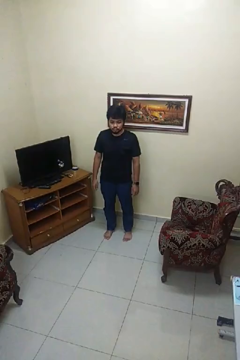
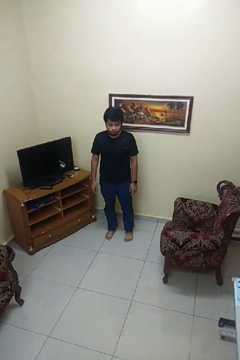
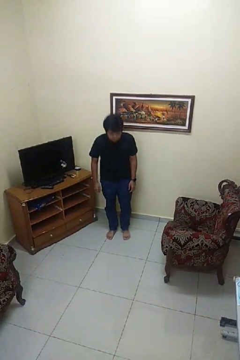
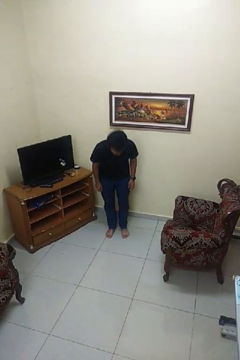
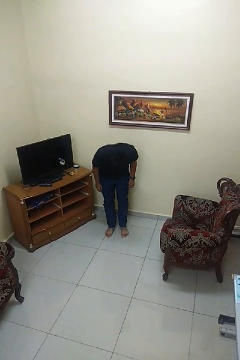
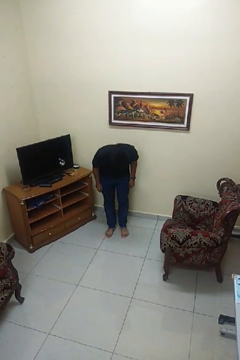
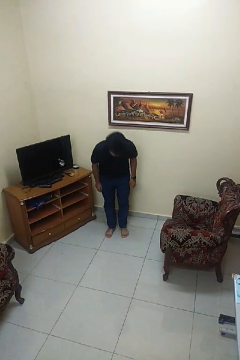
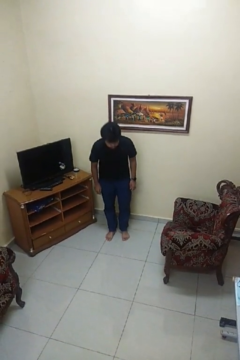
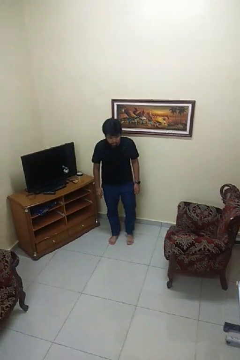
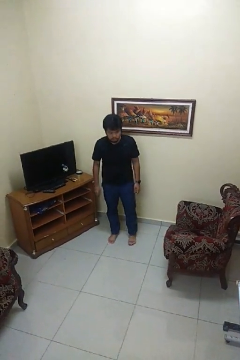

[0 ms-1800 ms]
person bows

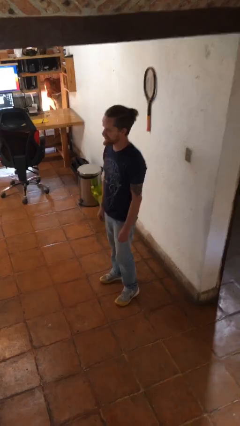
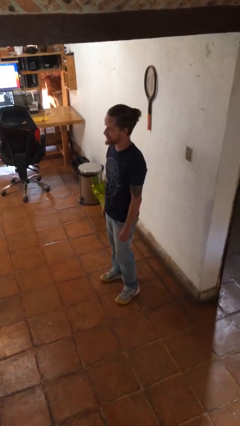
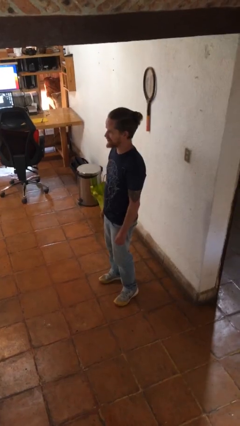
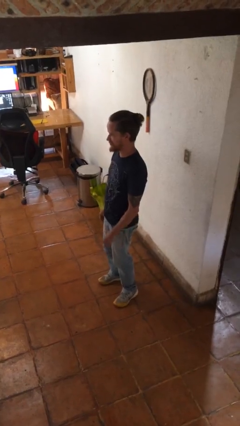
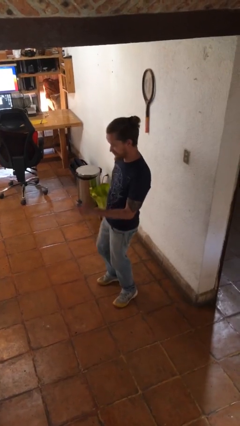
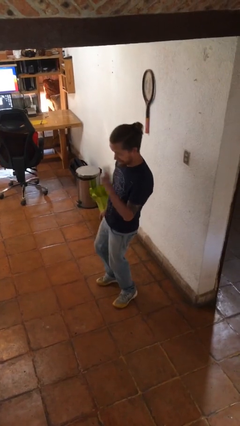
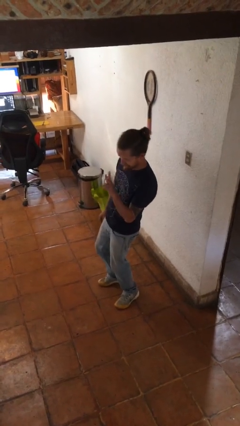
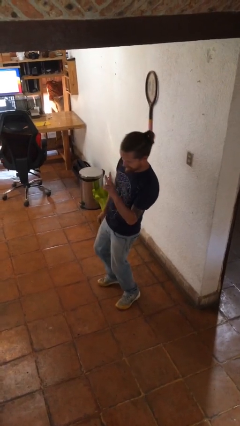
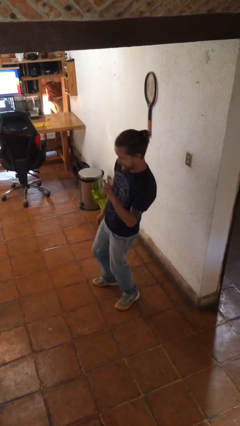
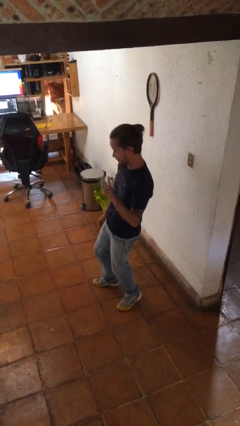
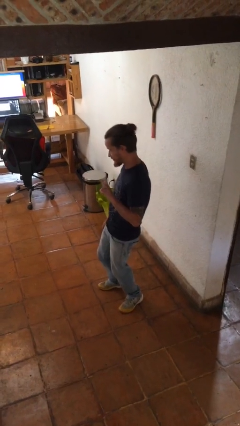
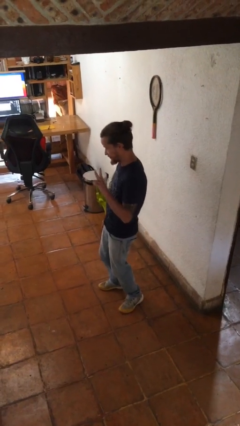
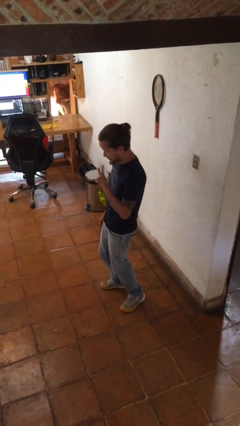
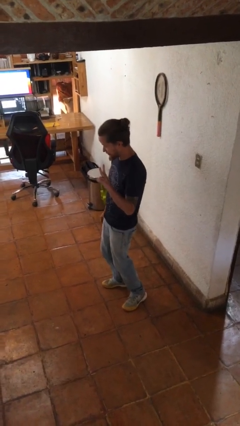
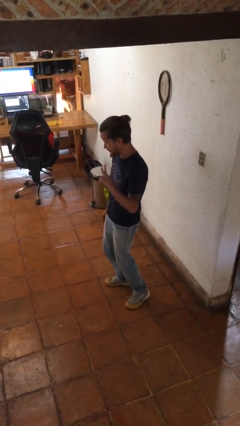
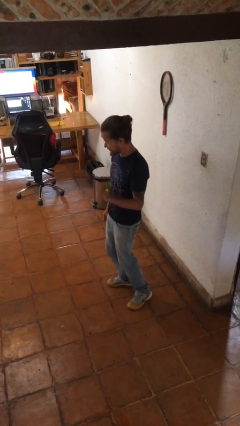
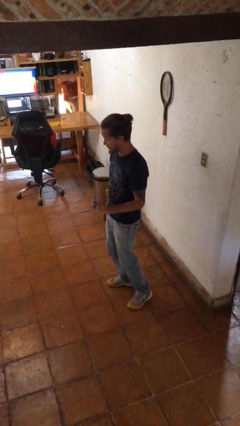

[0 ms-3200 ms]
person gestures peace

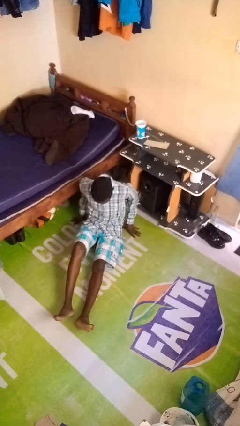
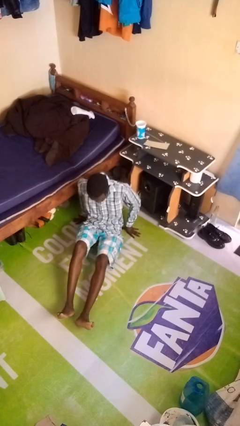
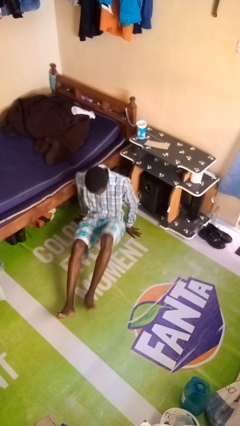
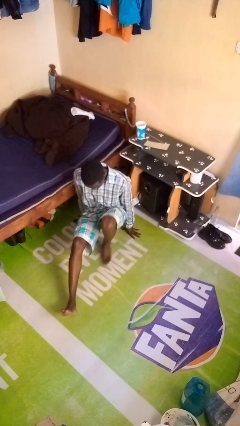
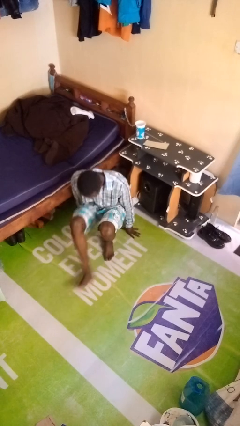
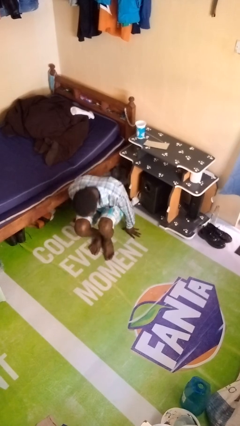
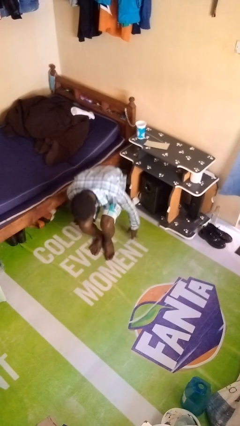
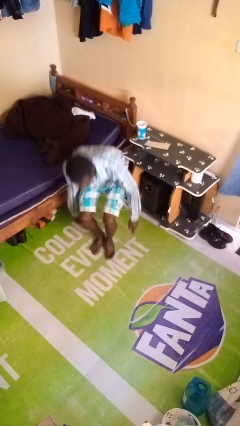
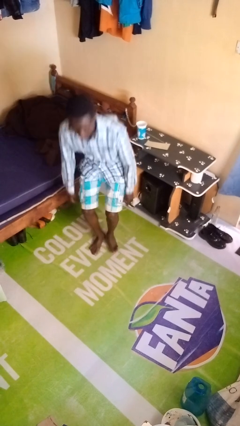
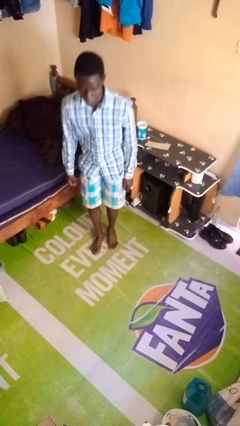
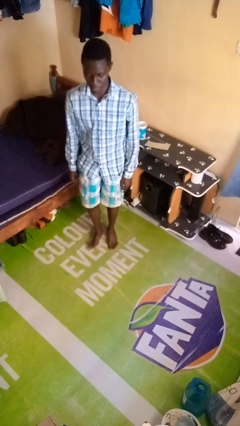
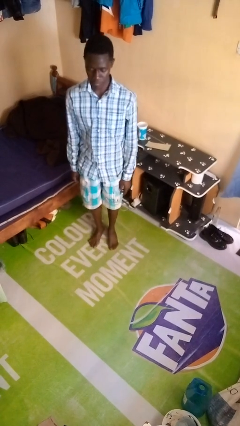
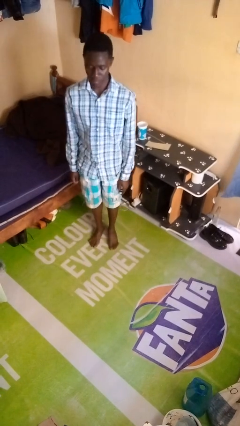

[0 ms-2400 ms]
person stands up from floor

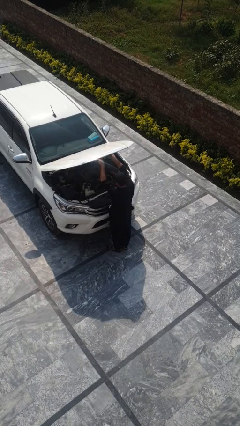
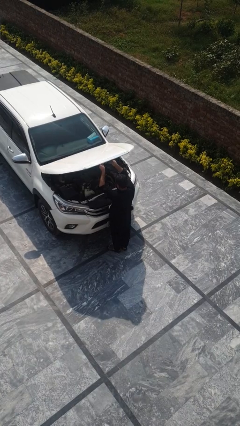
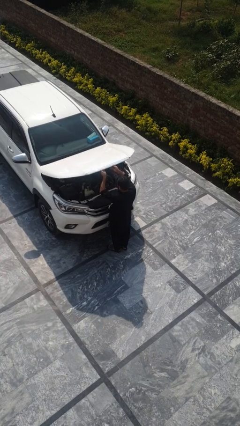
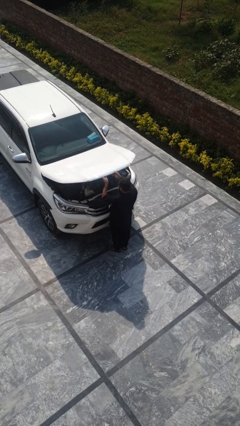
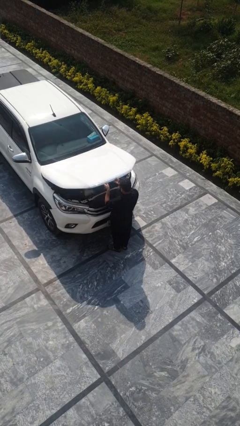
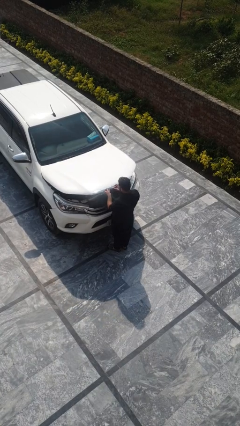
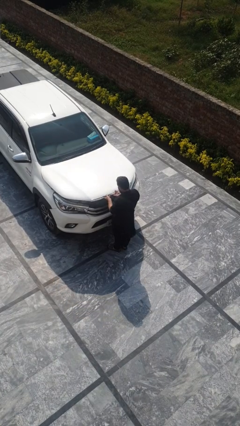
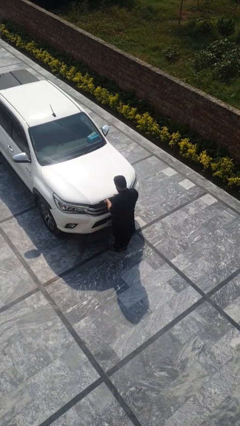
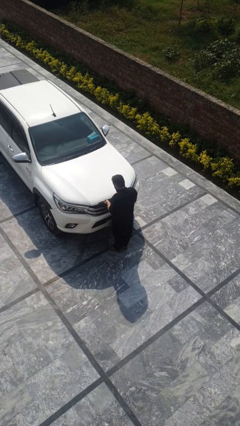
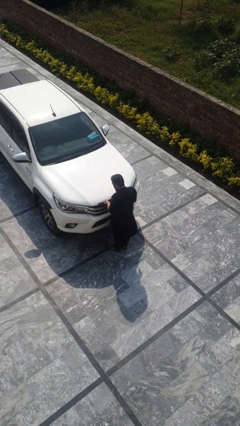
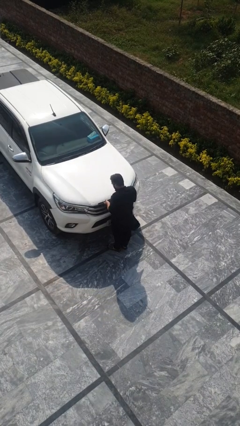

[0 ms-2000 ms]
person closes car hood

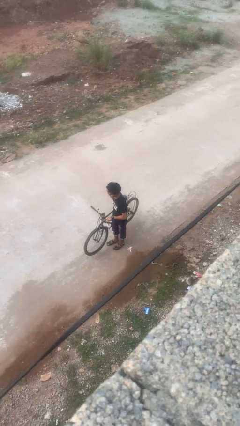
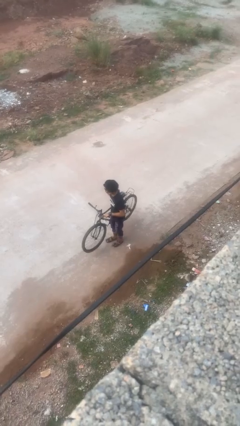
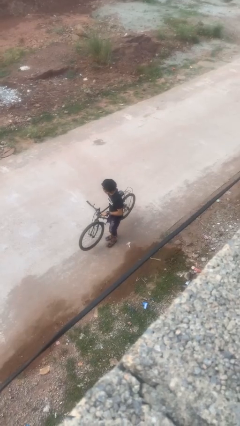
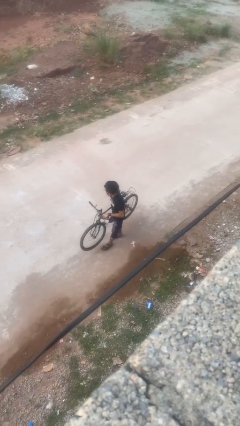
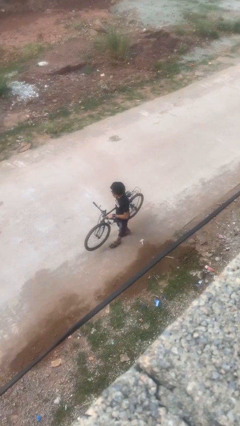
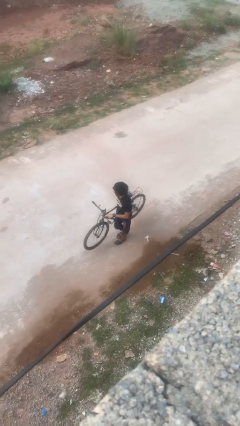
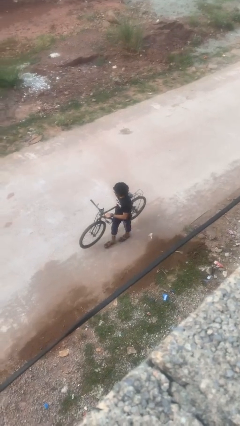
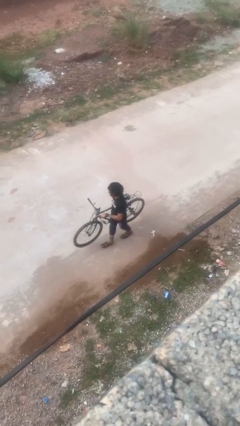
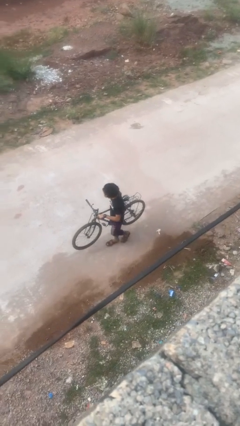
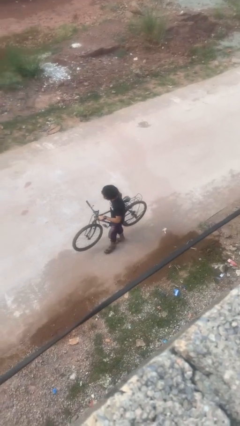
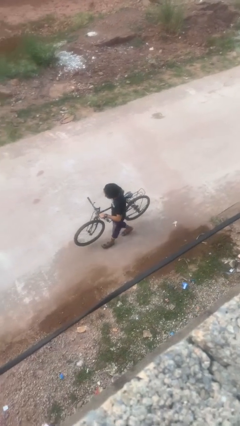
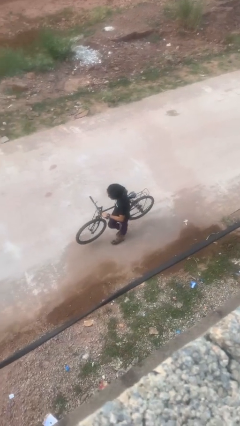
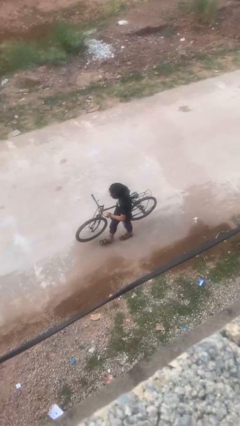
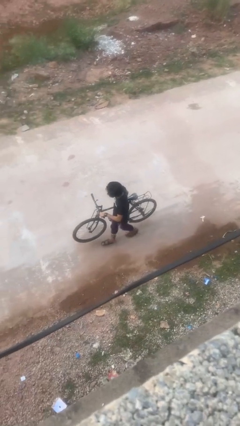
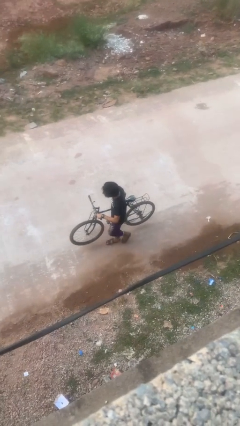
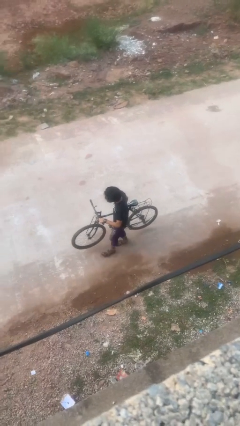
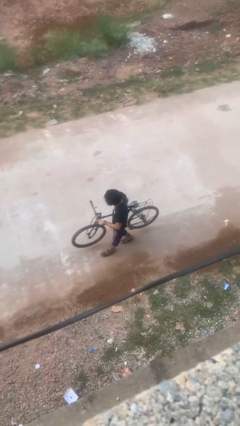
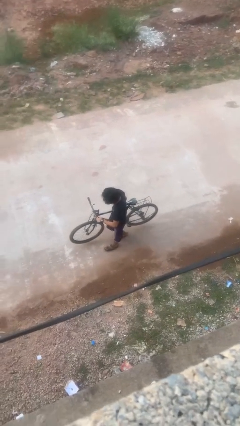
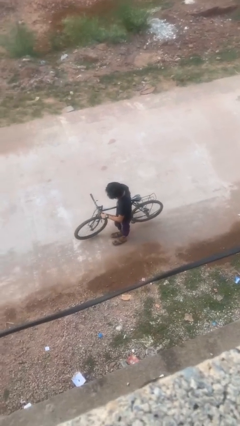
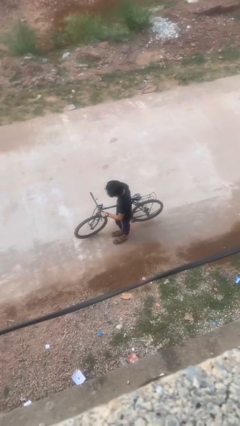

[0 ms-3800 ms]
person carries bicycle

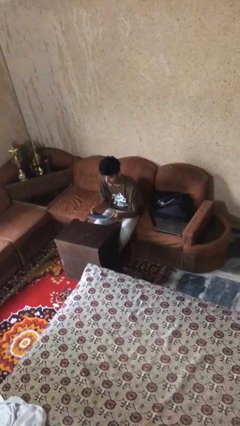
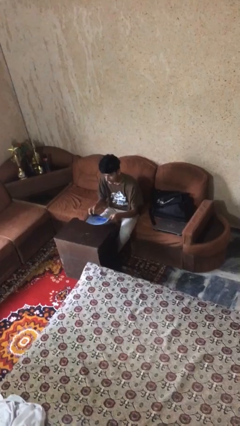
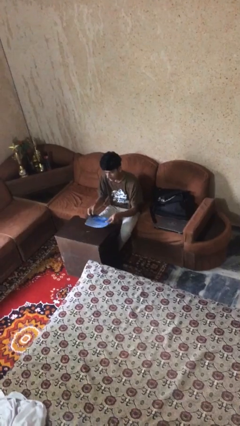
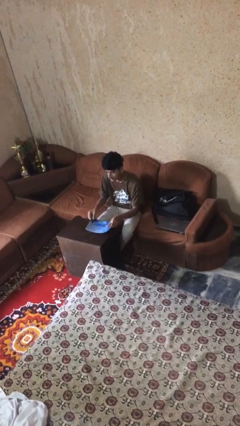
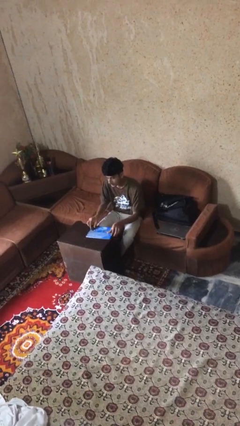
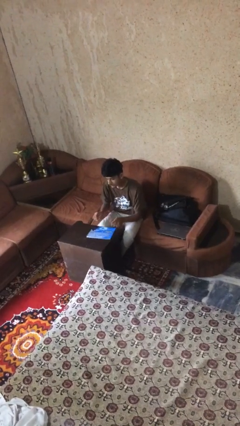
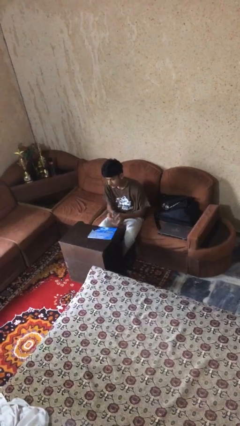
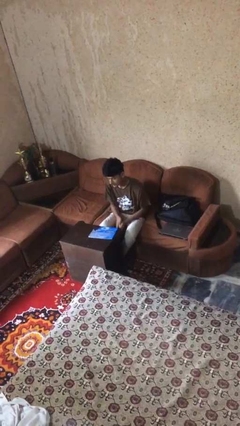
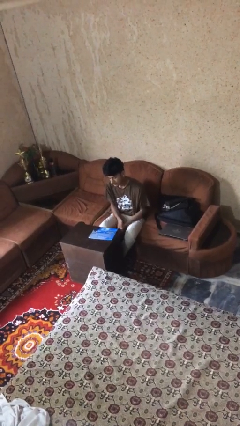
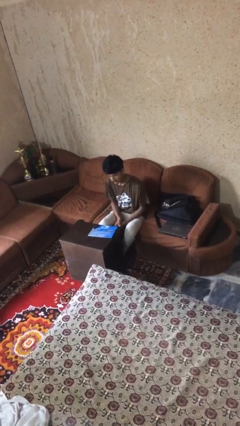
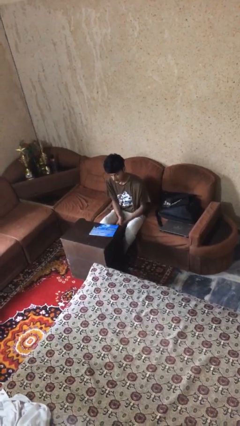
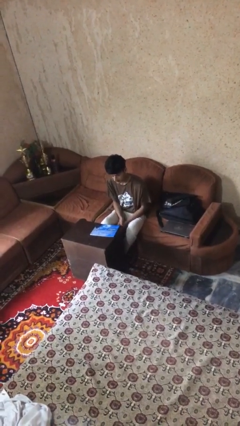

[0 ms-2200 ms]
person puts down object on table

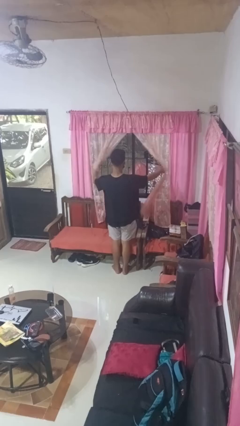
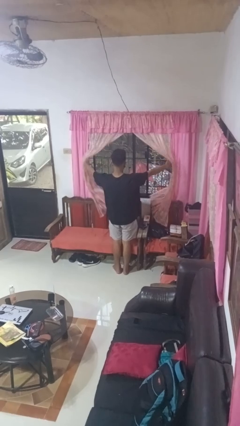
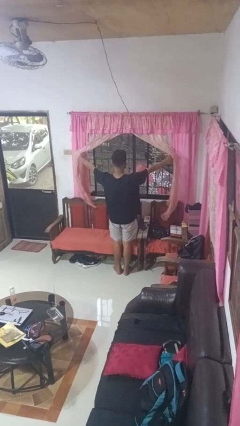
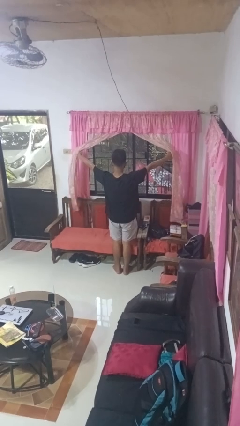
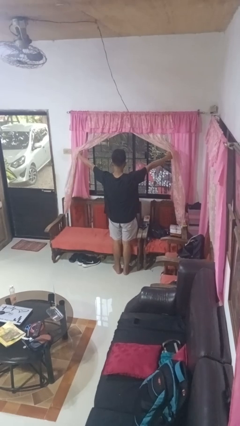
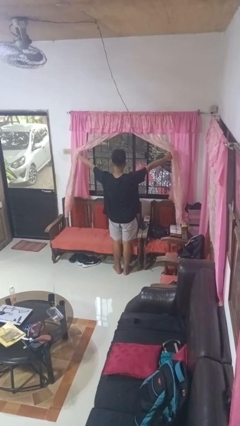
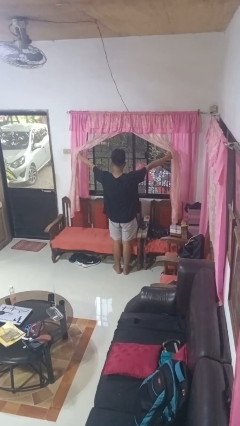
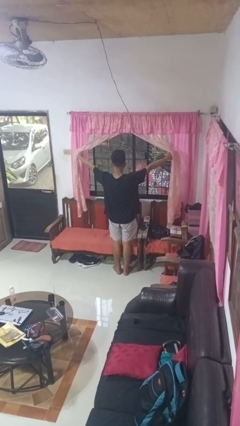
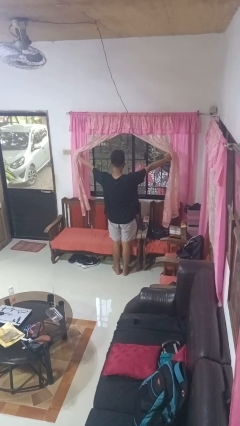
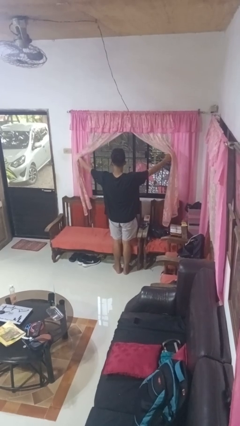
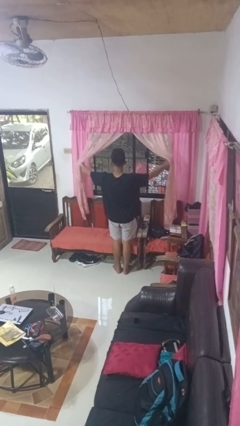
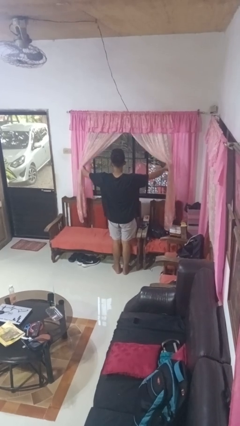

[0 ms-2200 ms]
person opens curtains
